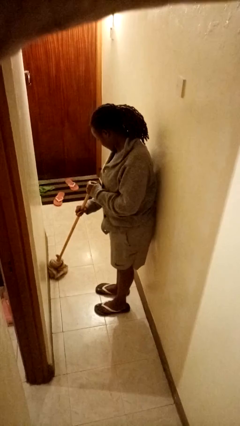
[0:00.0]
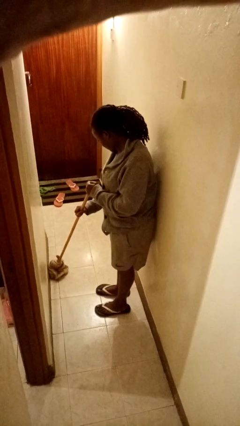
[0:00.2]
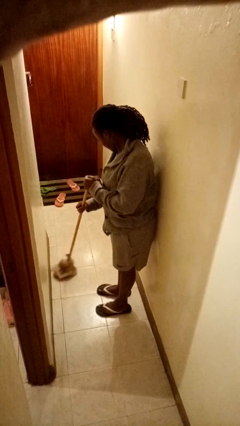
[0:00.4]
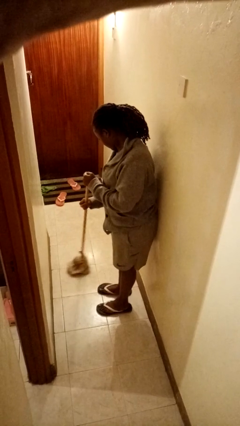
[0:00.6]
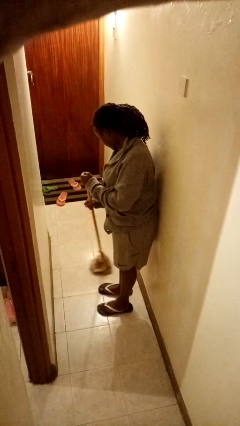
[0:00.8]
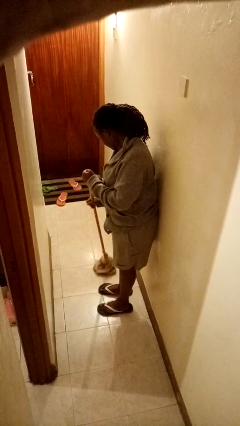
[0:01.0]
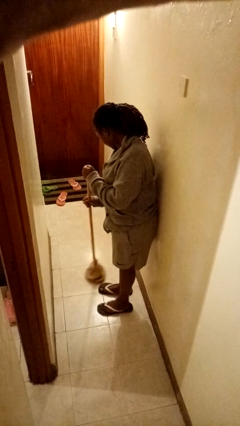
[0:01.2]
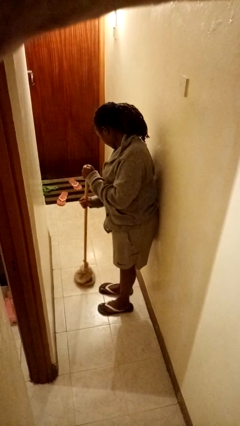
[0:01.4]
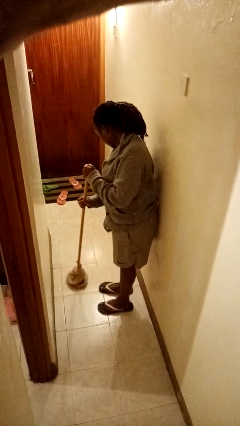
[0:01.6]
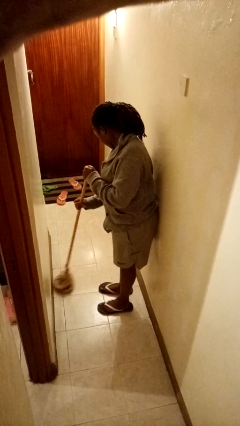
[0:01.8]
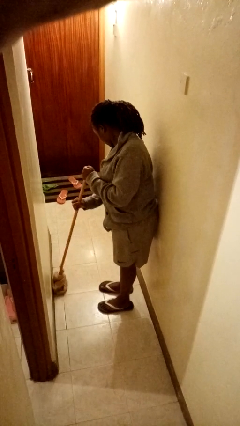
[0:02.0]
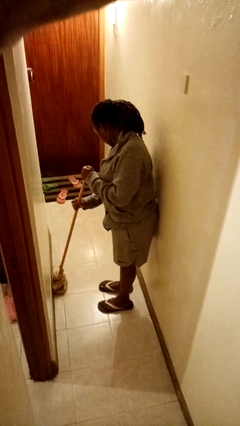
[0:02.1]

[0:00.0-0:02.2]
person mops

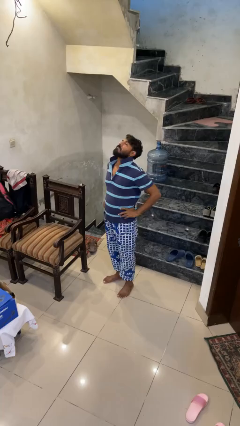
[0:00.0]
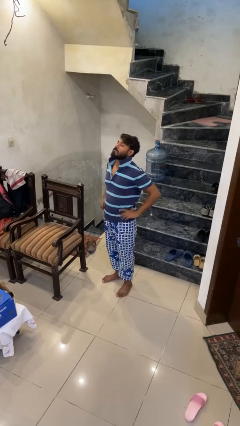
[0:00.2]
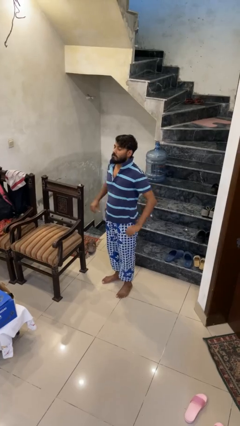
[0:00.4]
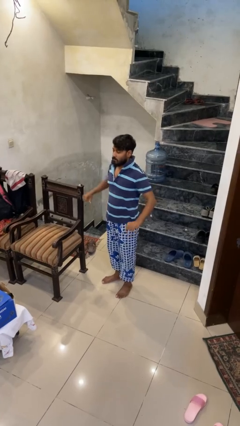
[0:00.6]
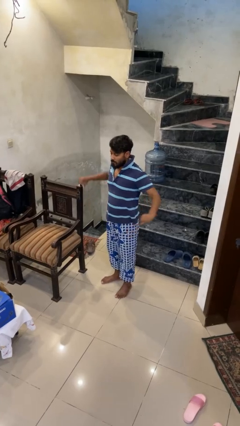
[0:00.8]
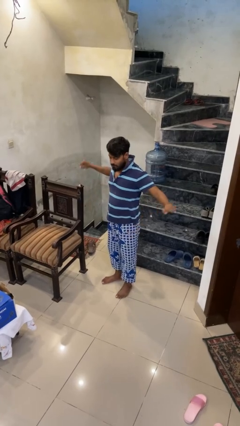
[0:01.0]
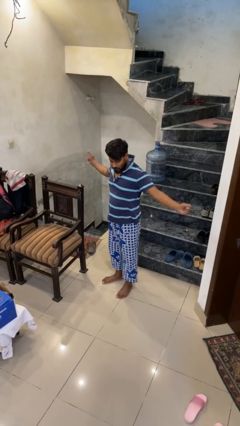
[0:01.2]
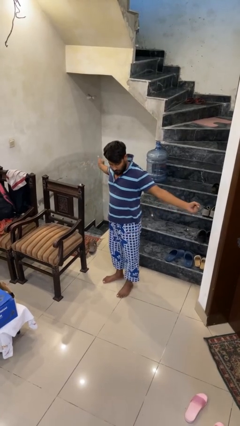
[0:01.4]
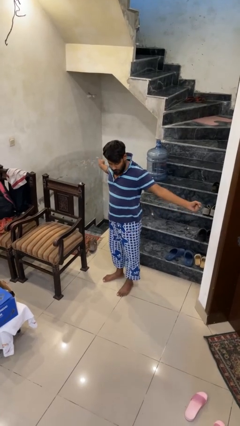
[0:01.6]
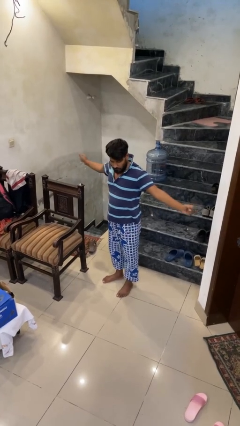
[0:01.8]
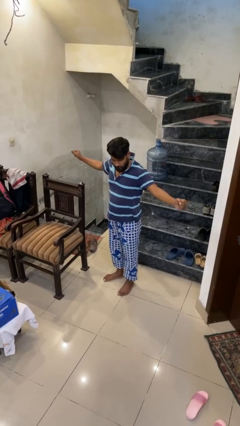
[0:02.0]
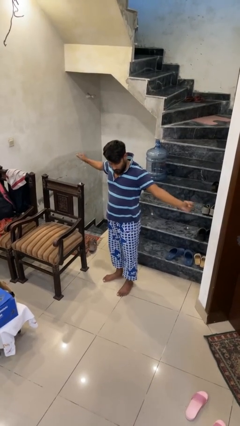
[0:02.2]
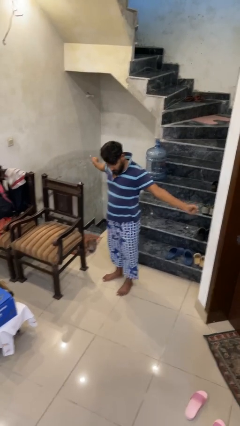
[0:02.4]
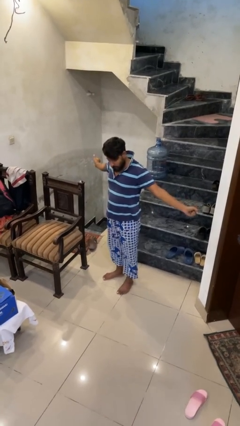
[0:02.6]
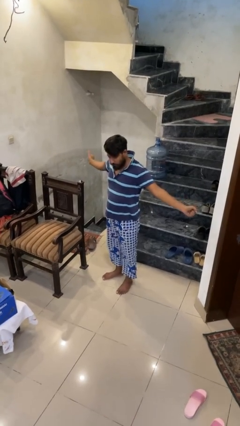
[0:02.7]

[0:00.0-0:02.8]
person stretches arms to side

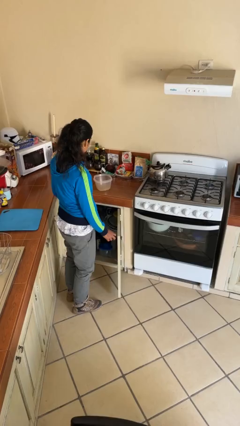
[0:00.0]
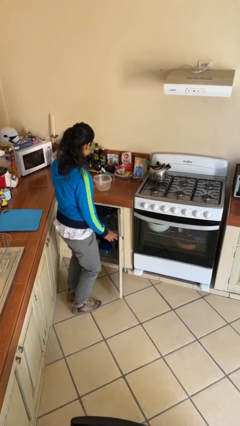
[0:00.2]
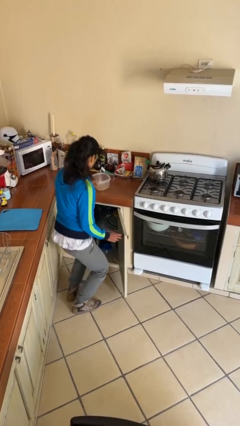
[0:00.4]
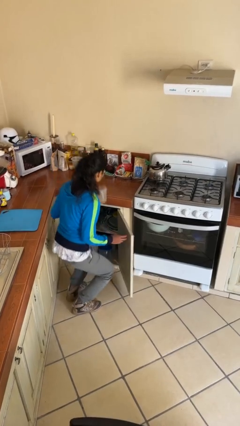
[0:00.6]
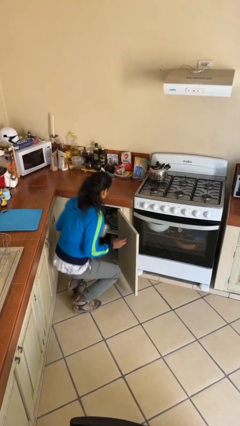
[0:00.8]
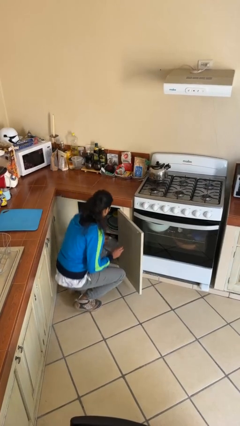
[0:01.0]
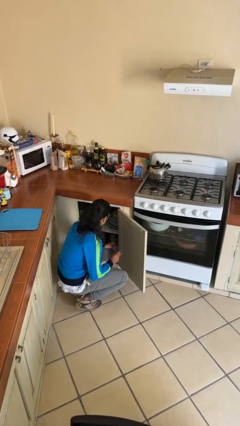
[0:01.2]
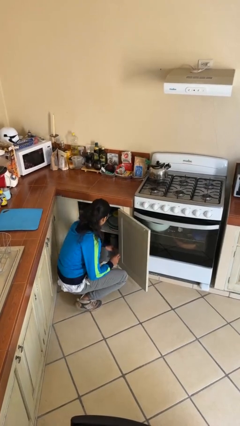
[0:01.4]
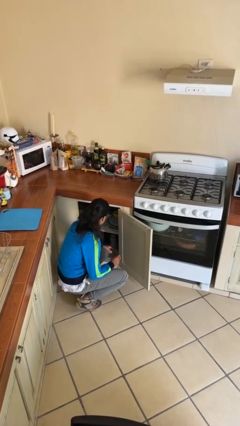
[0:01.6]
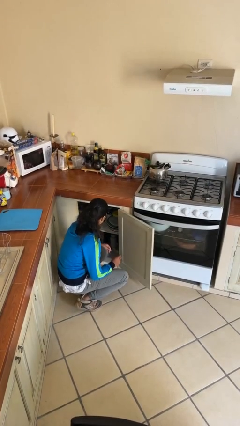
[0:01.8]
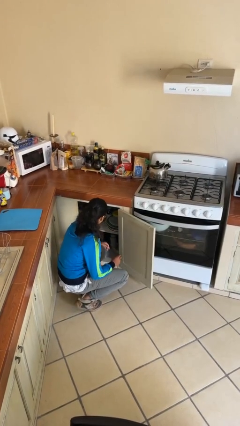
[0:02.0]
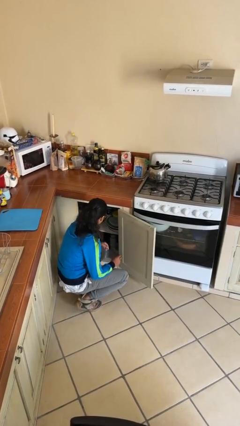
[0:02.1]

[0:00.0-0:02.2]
person puts object in cabinet

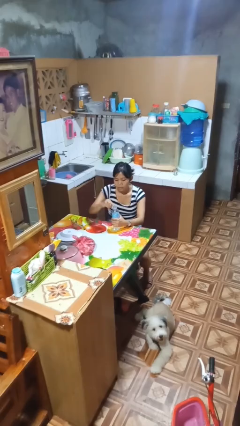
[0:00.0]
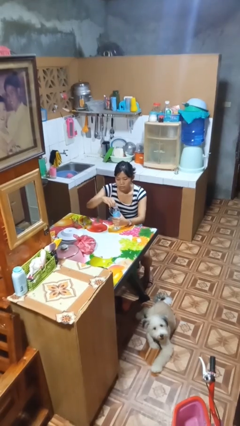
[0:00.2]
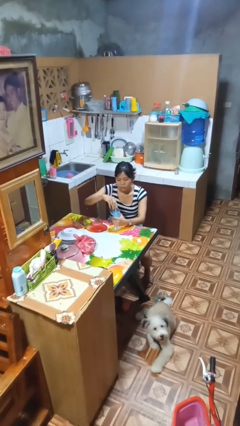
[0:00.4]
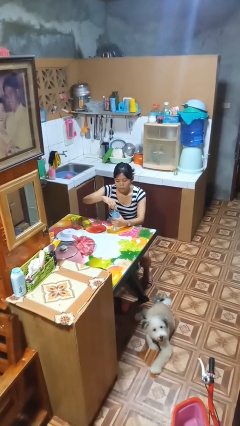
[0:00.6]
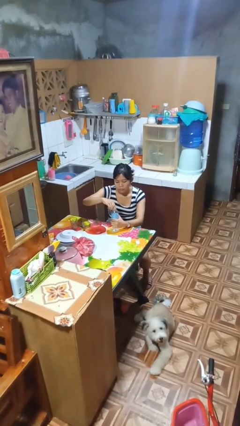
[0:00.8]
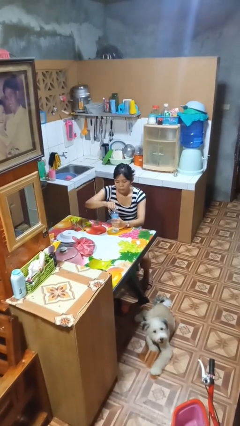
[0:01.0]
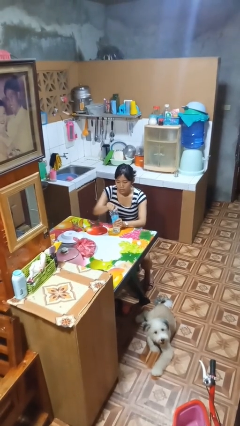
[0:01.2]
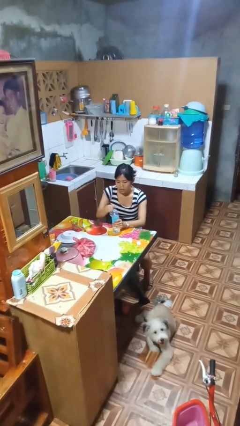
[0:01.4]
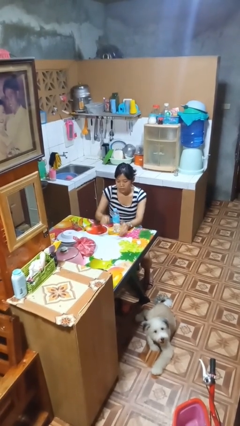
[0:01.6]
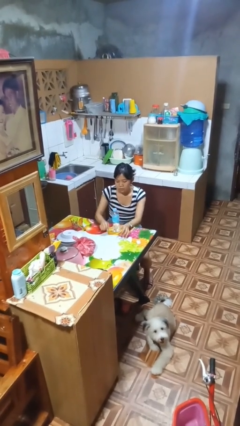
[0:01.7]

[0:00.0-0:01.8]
person screws lid to bottle

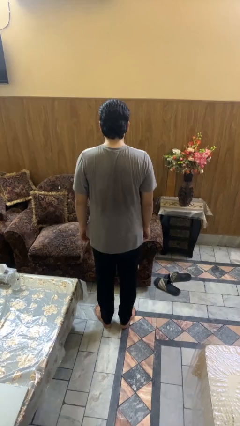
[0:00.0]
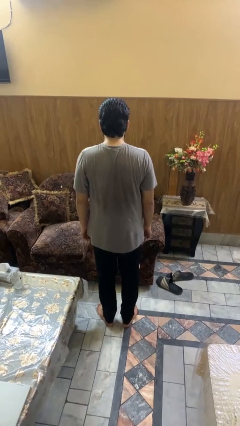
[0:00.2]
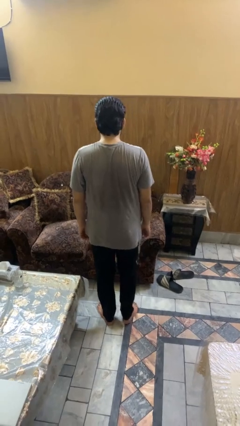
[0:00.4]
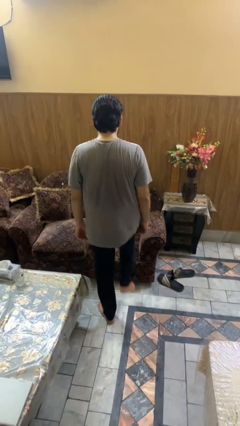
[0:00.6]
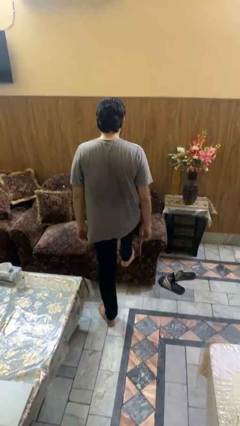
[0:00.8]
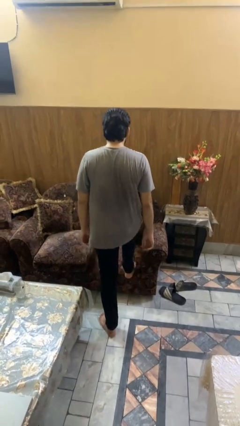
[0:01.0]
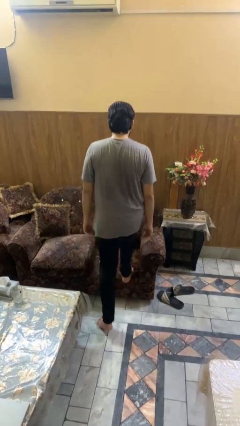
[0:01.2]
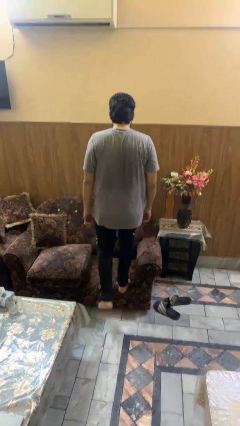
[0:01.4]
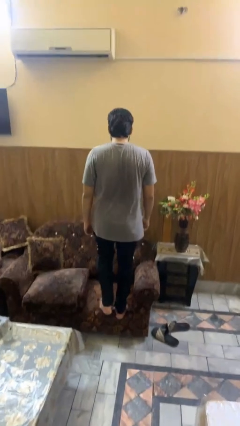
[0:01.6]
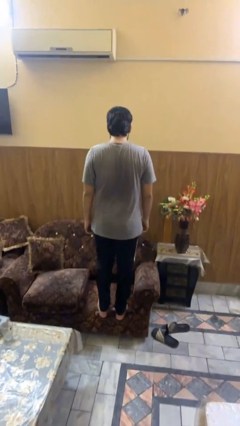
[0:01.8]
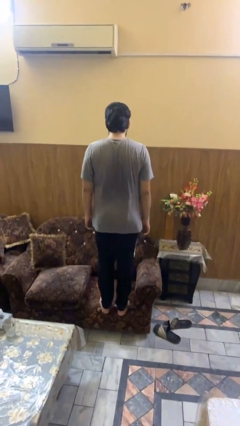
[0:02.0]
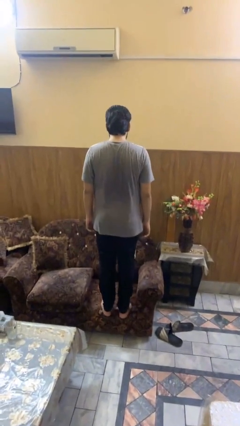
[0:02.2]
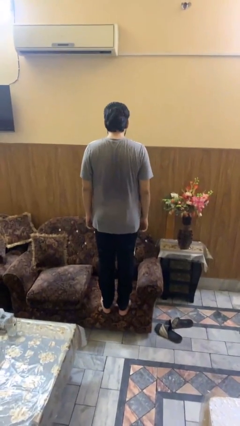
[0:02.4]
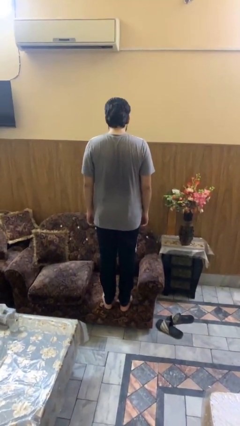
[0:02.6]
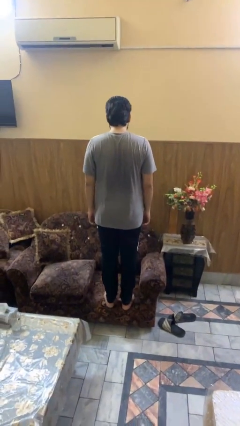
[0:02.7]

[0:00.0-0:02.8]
person climbs on couch

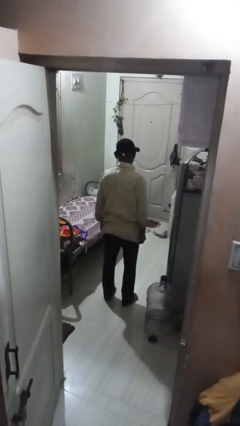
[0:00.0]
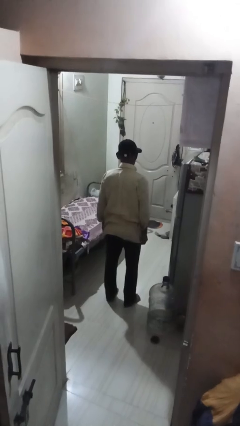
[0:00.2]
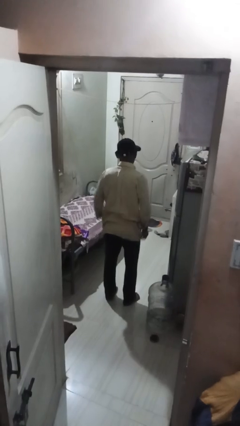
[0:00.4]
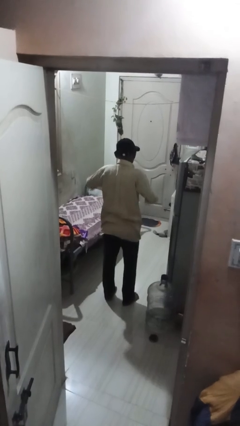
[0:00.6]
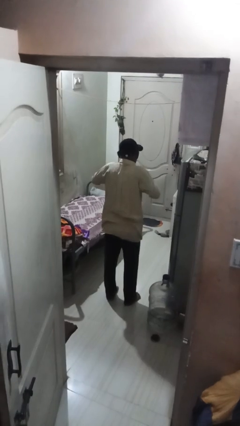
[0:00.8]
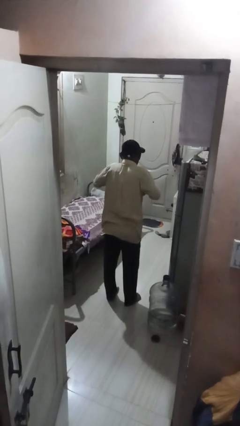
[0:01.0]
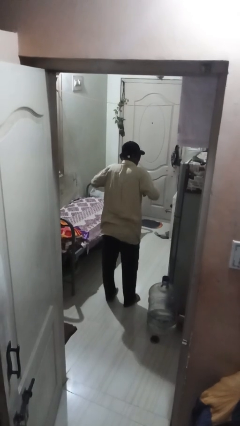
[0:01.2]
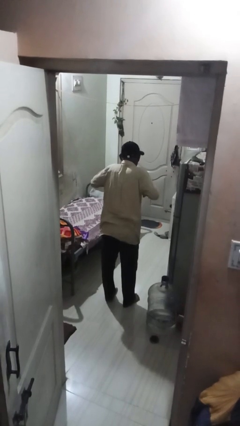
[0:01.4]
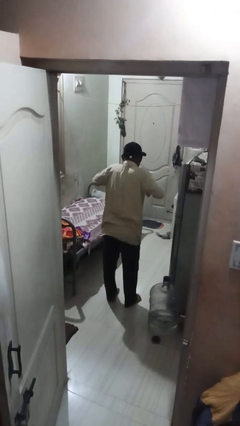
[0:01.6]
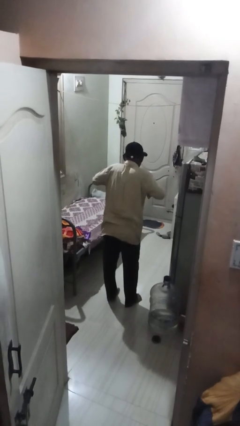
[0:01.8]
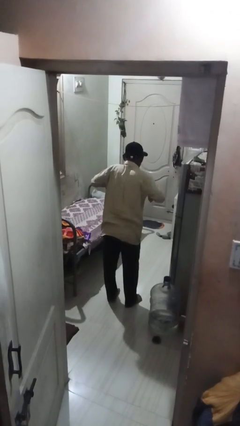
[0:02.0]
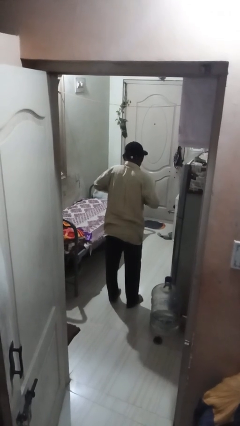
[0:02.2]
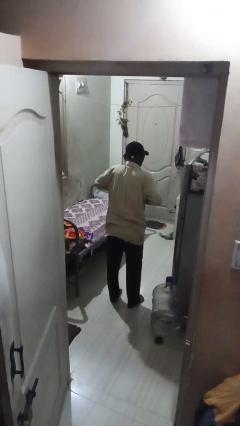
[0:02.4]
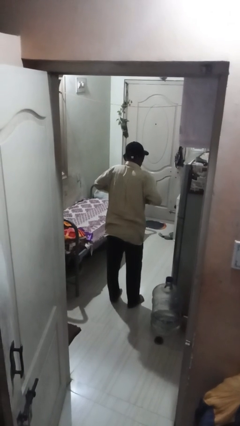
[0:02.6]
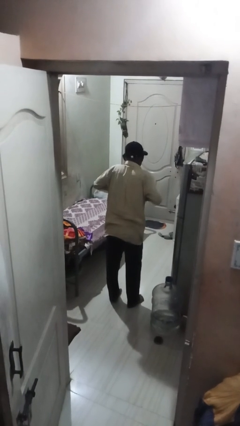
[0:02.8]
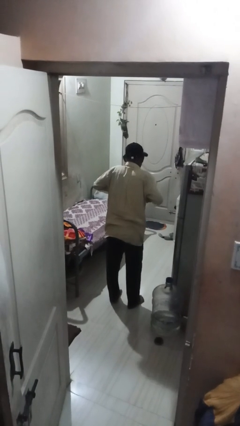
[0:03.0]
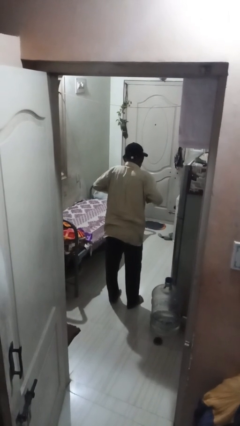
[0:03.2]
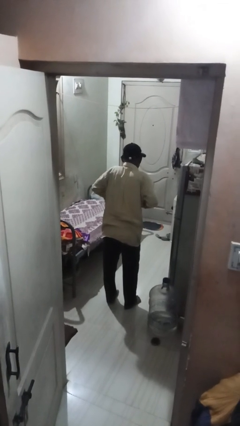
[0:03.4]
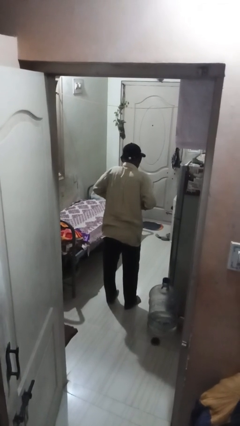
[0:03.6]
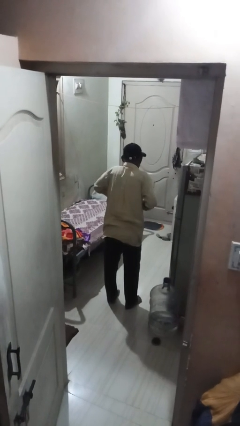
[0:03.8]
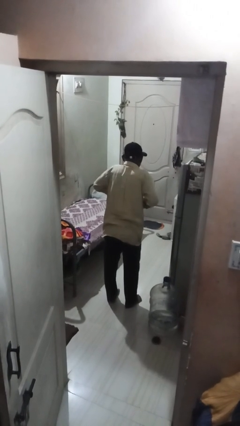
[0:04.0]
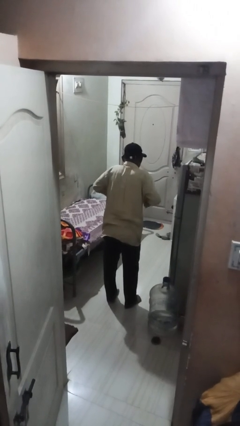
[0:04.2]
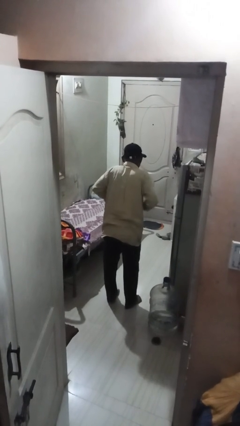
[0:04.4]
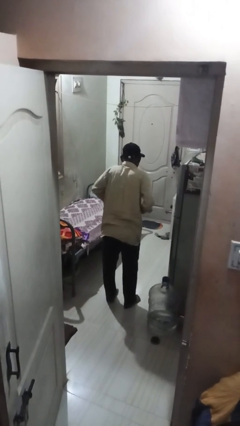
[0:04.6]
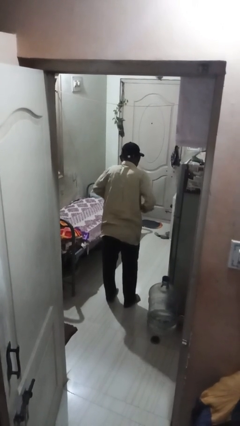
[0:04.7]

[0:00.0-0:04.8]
person buttons shirt

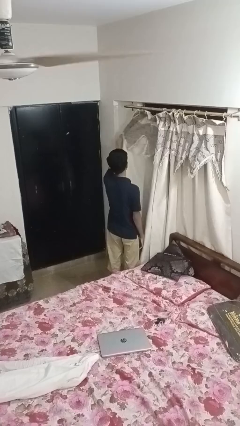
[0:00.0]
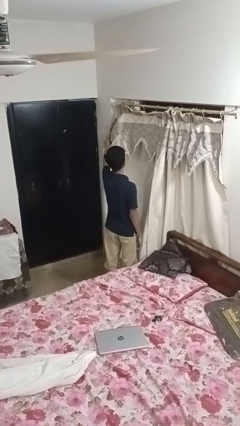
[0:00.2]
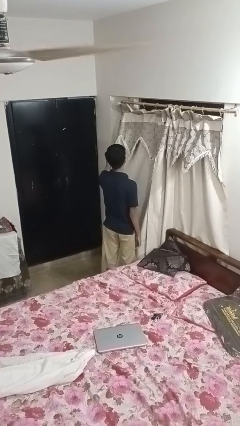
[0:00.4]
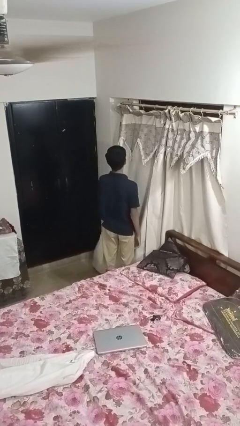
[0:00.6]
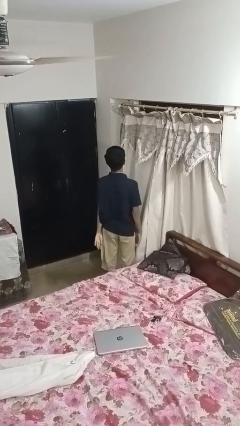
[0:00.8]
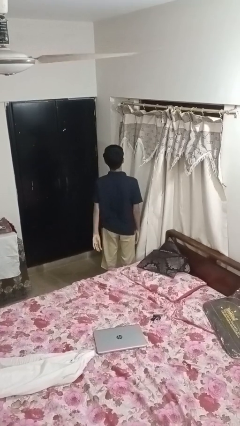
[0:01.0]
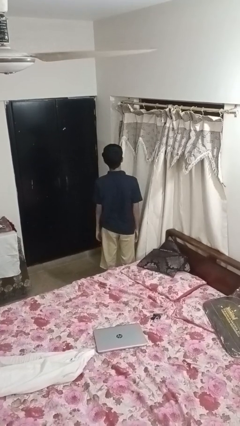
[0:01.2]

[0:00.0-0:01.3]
person closes curtains
